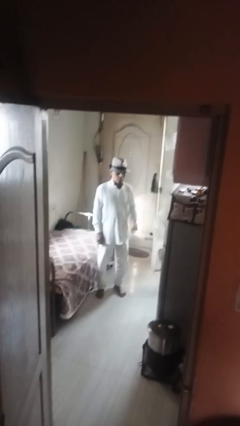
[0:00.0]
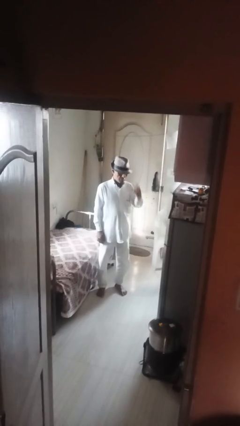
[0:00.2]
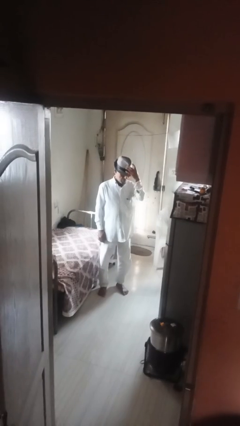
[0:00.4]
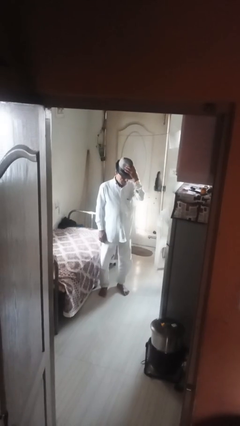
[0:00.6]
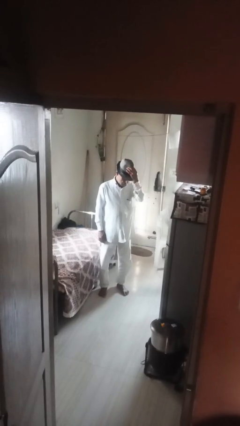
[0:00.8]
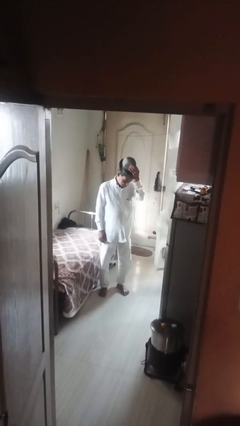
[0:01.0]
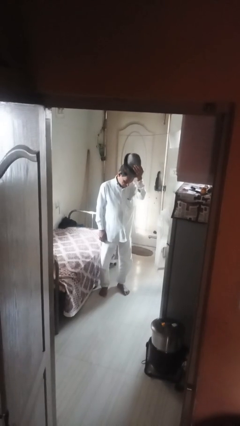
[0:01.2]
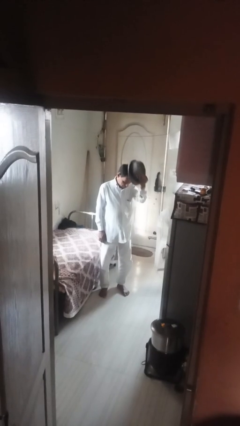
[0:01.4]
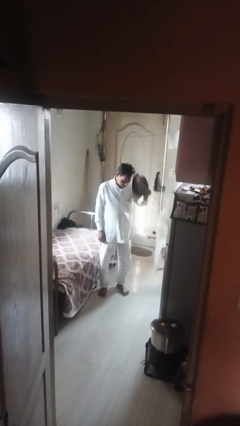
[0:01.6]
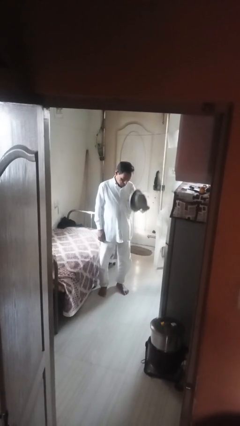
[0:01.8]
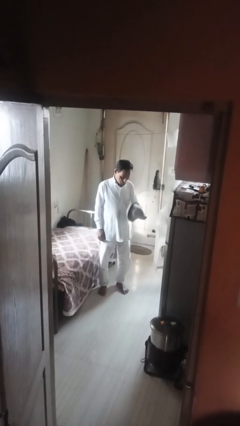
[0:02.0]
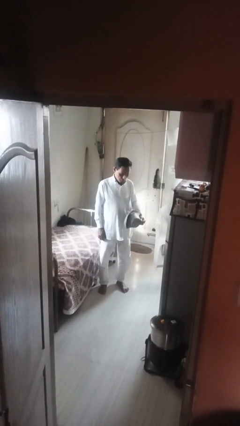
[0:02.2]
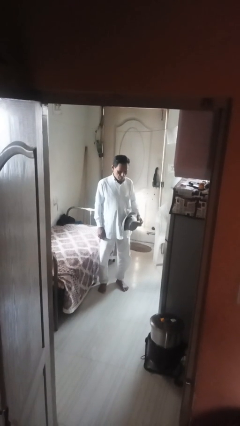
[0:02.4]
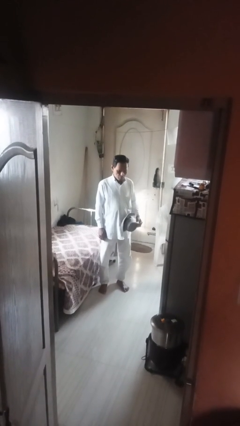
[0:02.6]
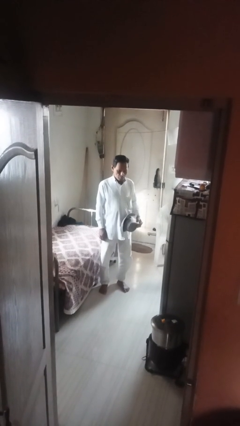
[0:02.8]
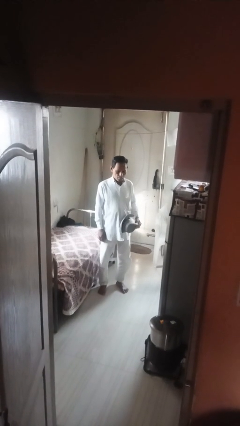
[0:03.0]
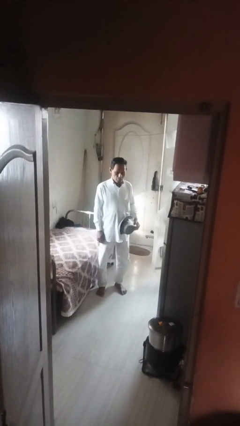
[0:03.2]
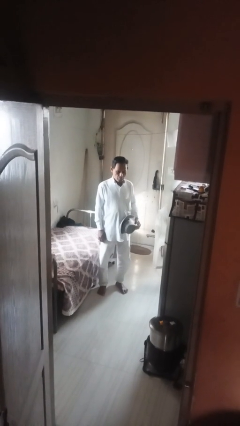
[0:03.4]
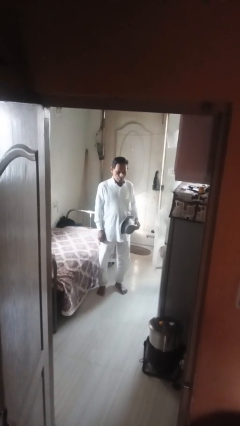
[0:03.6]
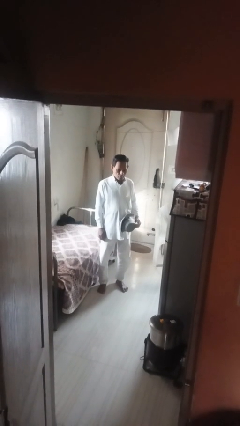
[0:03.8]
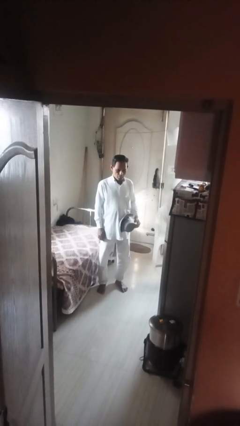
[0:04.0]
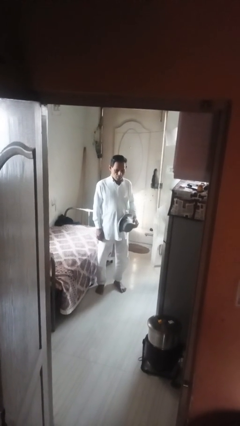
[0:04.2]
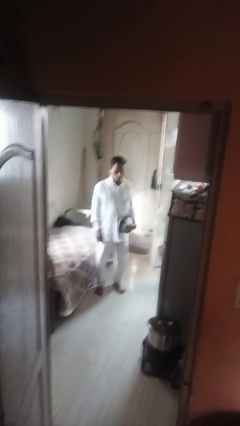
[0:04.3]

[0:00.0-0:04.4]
person takes off hat

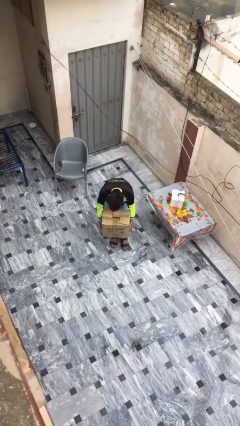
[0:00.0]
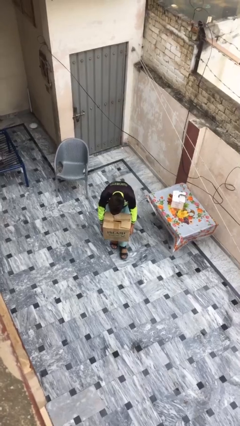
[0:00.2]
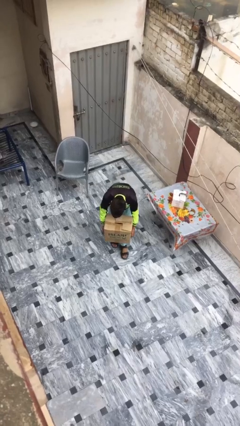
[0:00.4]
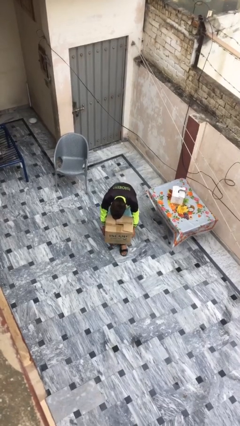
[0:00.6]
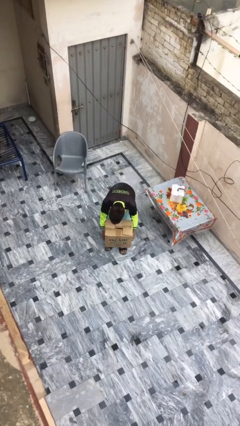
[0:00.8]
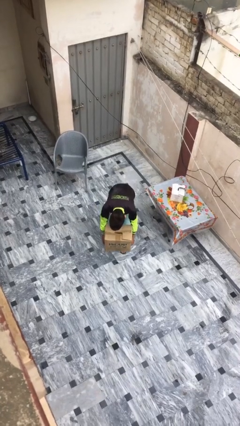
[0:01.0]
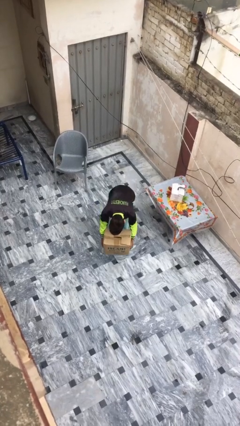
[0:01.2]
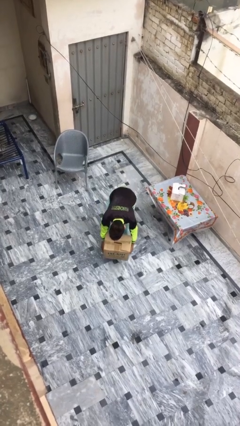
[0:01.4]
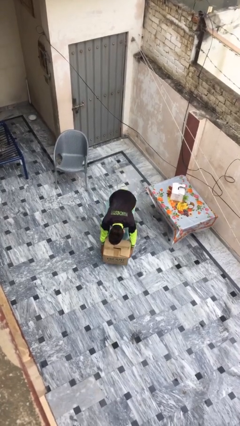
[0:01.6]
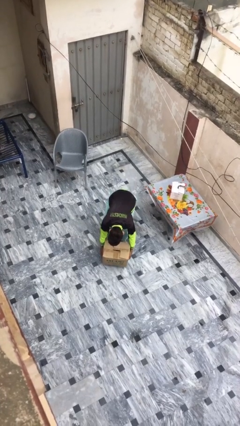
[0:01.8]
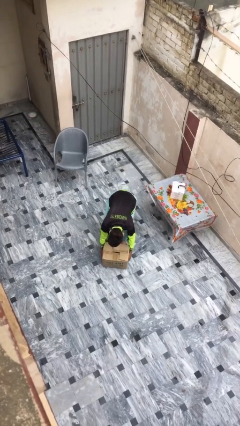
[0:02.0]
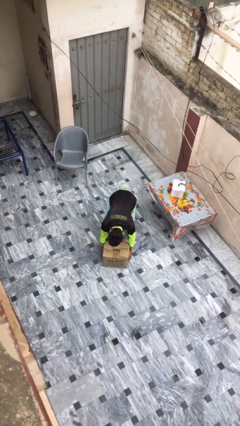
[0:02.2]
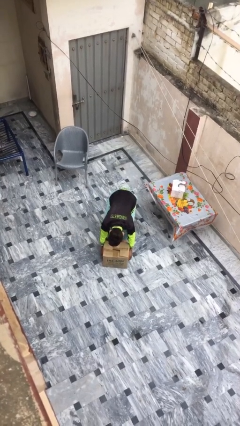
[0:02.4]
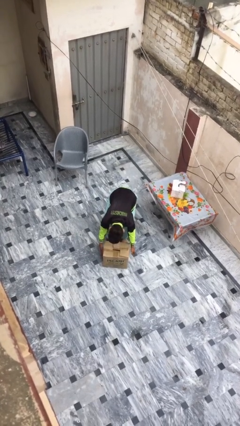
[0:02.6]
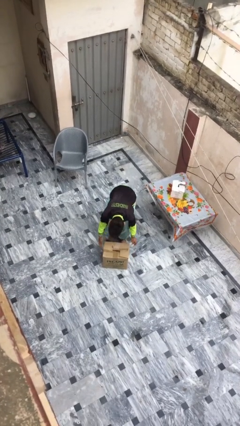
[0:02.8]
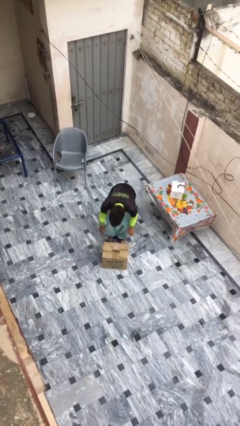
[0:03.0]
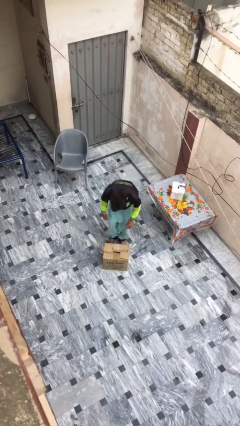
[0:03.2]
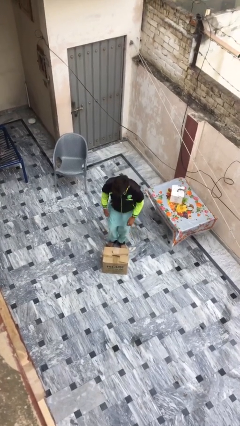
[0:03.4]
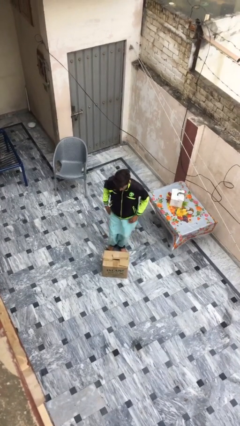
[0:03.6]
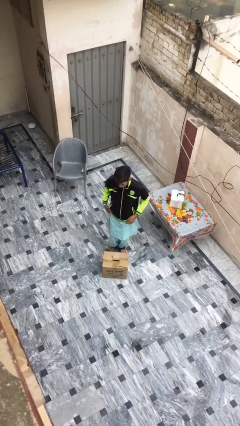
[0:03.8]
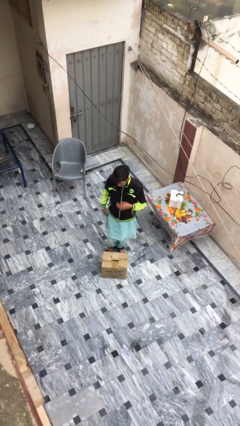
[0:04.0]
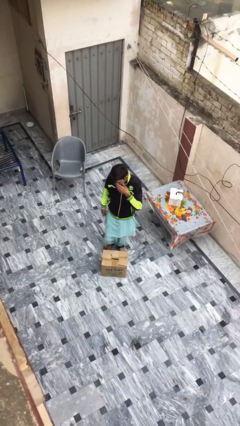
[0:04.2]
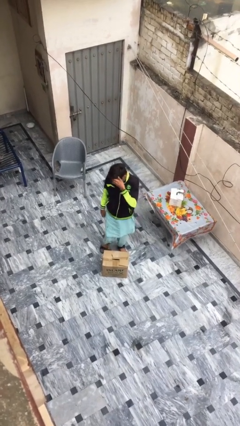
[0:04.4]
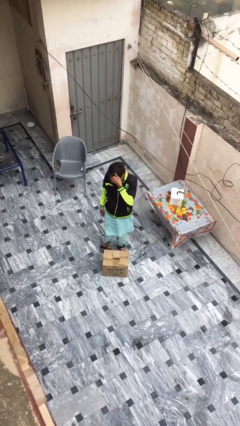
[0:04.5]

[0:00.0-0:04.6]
person puts down object on floor

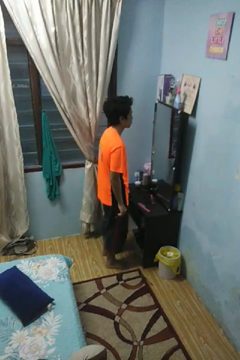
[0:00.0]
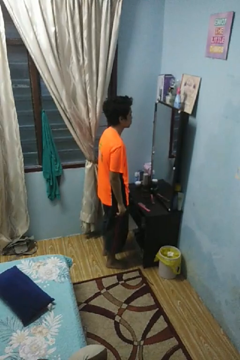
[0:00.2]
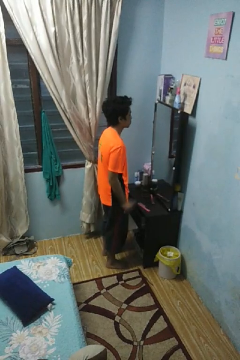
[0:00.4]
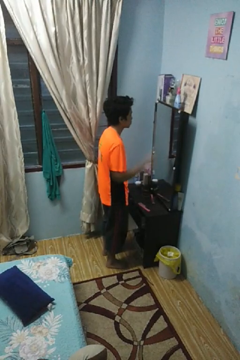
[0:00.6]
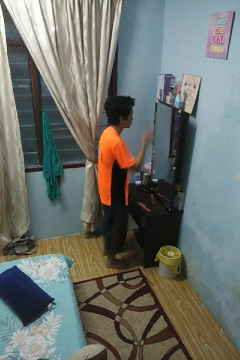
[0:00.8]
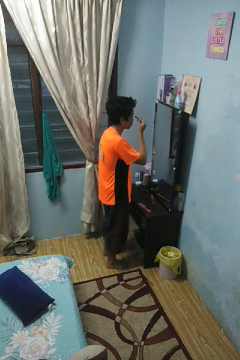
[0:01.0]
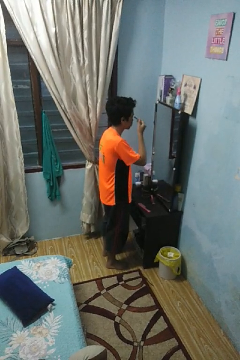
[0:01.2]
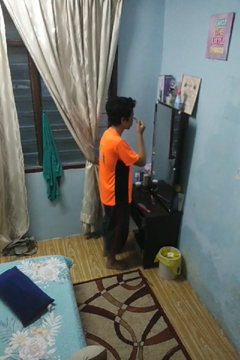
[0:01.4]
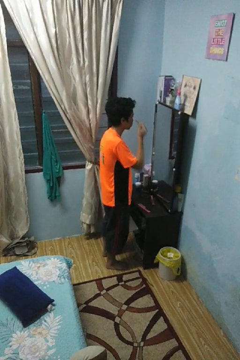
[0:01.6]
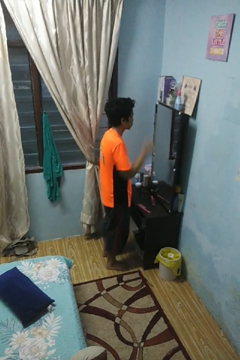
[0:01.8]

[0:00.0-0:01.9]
person applies eye makeup

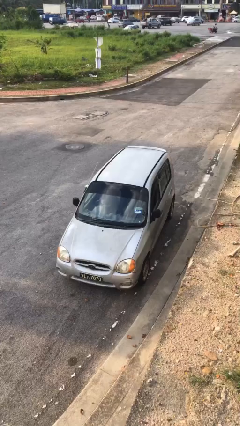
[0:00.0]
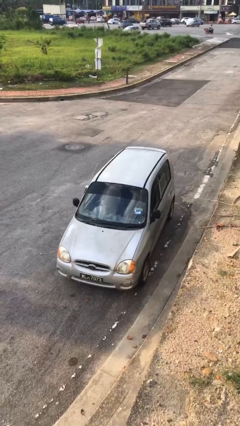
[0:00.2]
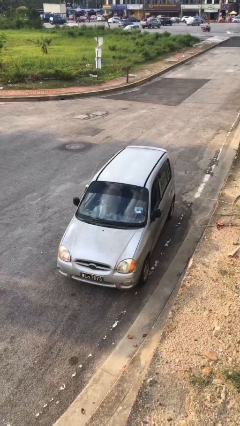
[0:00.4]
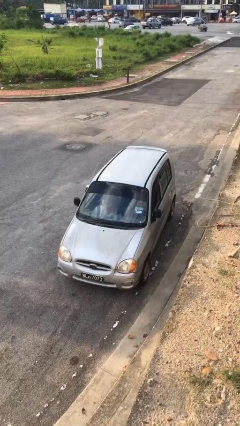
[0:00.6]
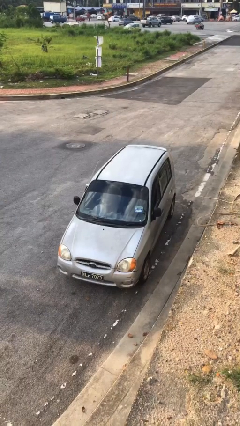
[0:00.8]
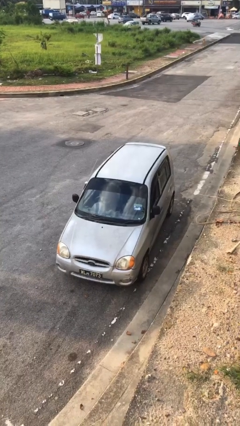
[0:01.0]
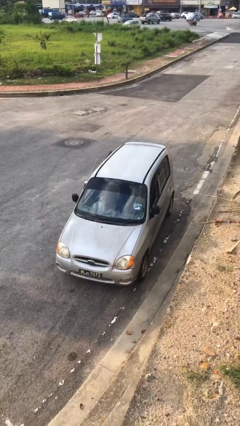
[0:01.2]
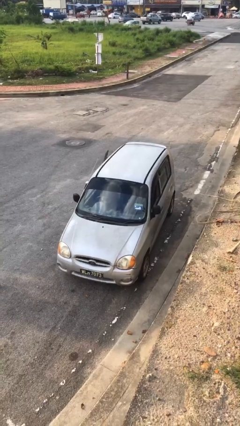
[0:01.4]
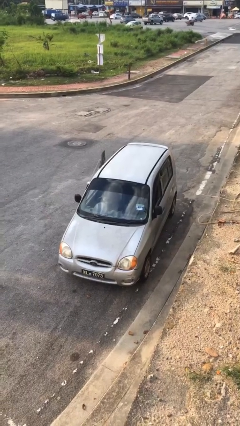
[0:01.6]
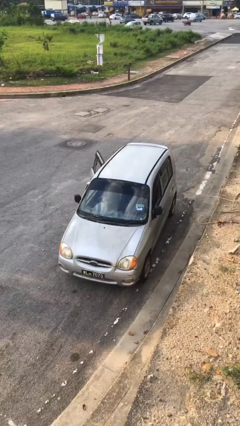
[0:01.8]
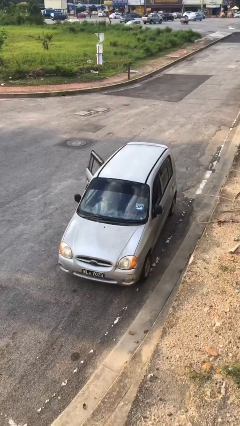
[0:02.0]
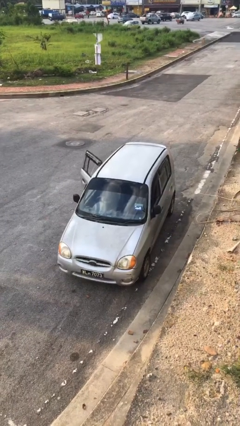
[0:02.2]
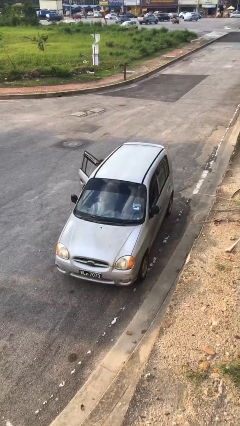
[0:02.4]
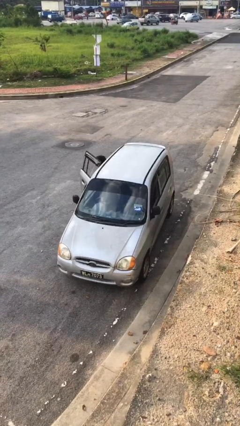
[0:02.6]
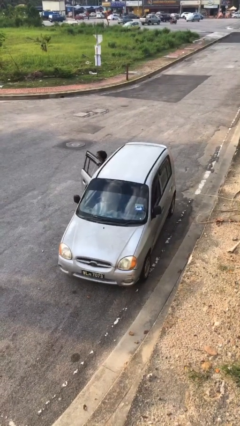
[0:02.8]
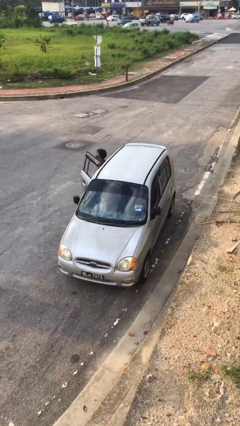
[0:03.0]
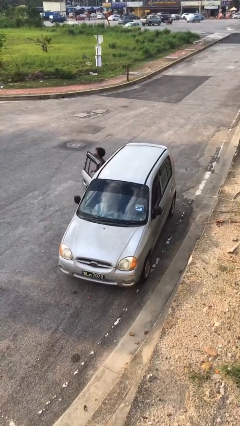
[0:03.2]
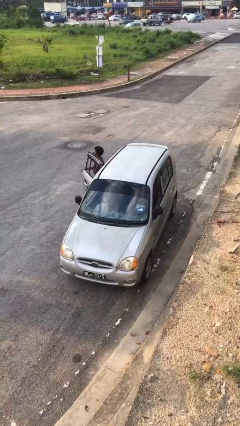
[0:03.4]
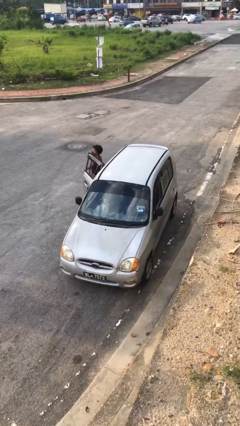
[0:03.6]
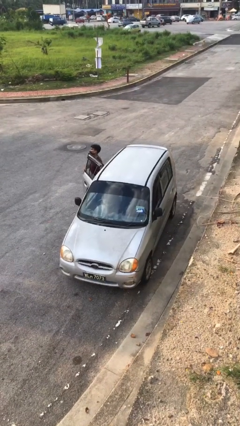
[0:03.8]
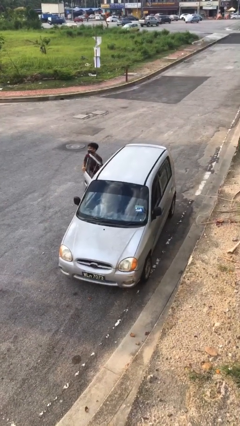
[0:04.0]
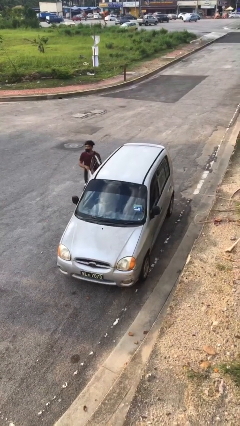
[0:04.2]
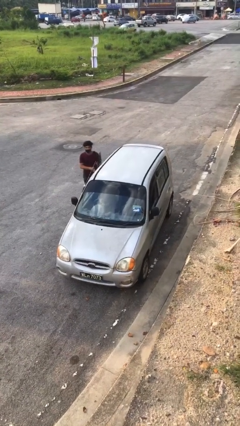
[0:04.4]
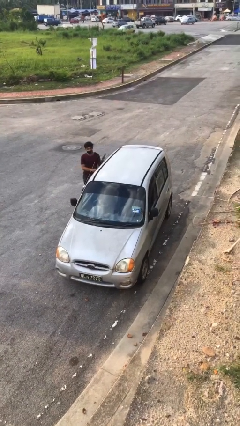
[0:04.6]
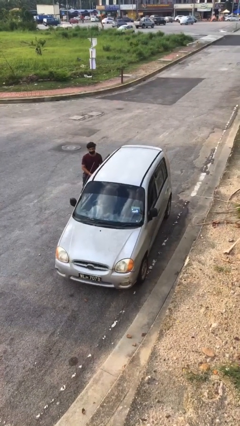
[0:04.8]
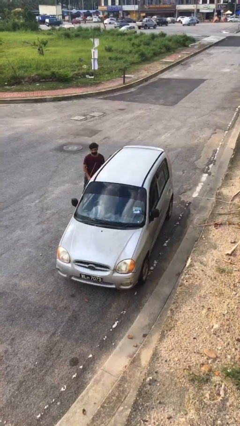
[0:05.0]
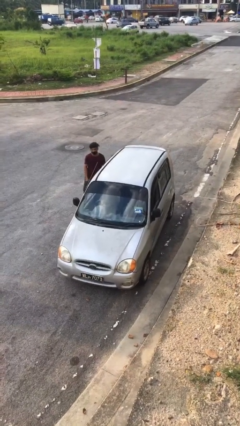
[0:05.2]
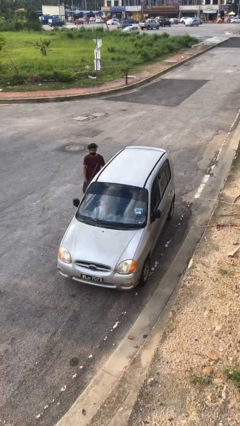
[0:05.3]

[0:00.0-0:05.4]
car drops off person

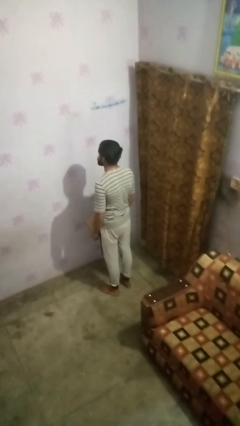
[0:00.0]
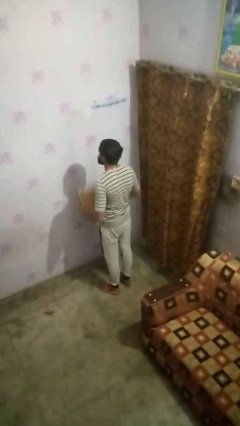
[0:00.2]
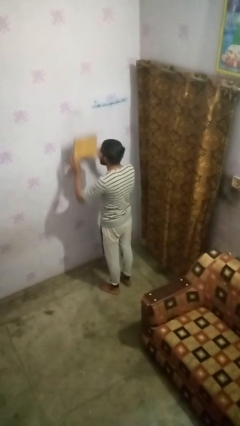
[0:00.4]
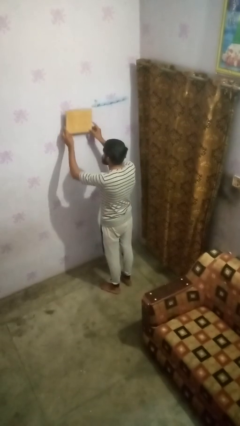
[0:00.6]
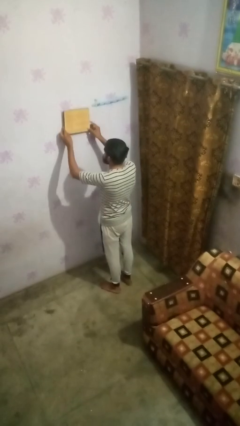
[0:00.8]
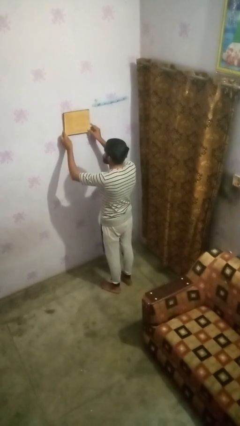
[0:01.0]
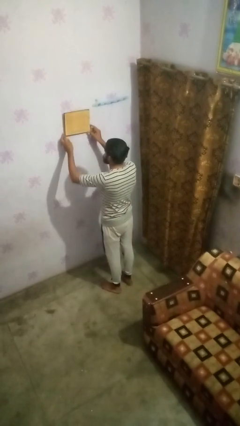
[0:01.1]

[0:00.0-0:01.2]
person puts up picture frame

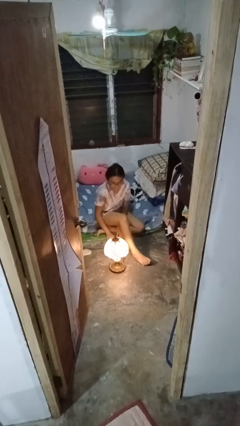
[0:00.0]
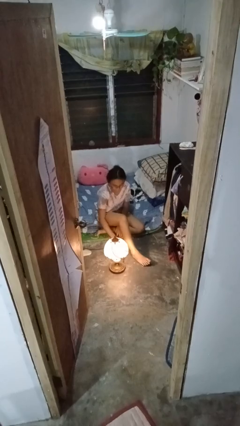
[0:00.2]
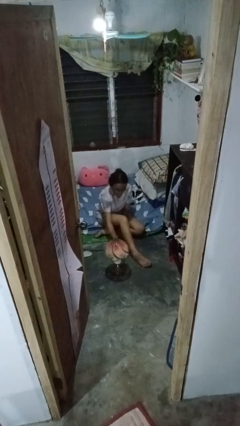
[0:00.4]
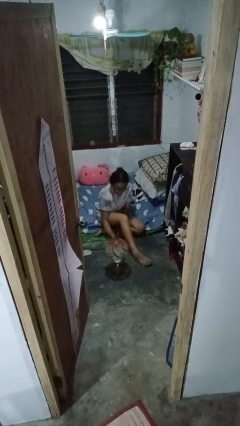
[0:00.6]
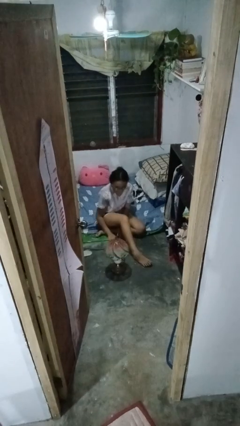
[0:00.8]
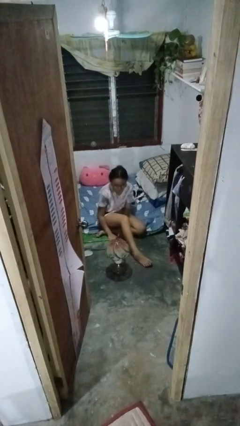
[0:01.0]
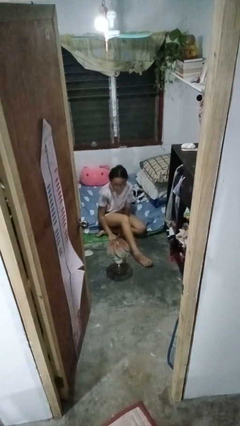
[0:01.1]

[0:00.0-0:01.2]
person turns off lamp
